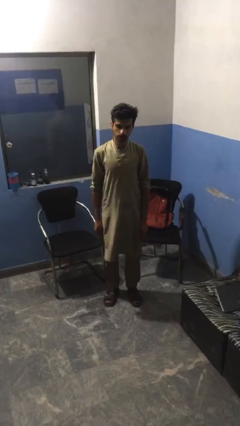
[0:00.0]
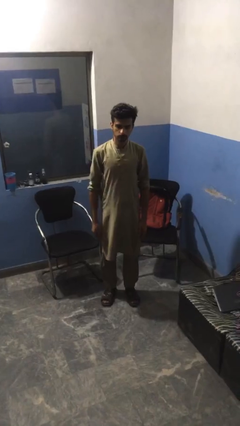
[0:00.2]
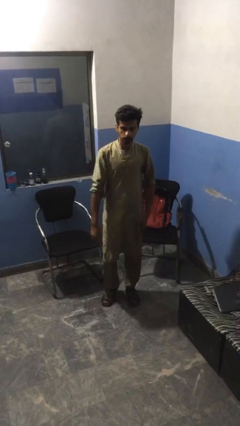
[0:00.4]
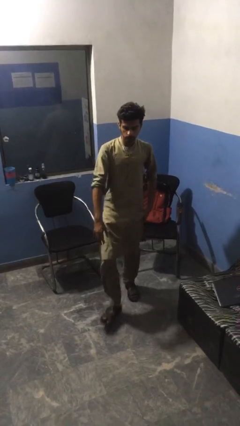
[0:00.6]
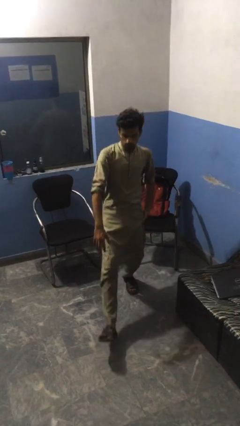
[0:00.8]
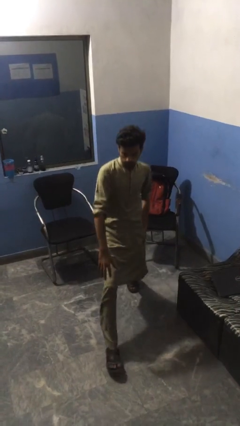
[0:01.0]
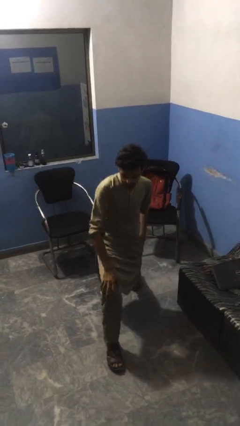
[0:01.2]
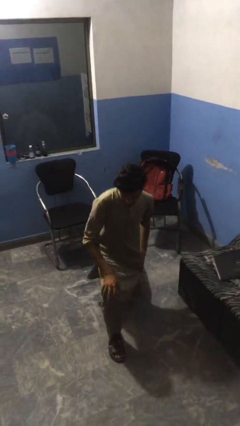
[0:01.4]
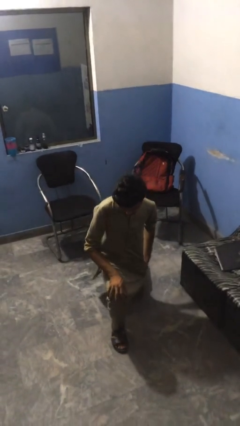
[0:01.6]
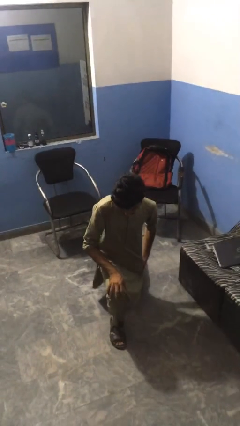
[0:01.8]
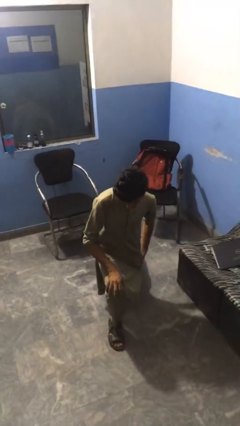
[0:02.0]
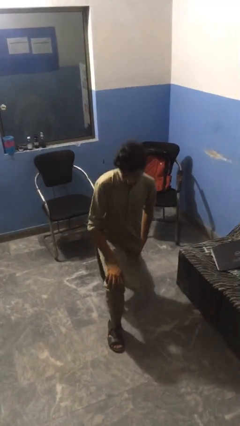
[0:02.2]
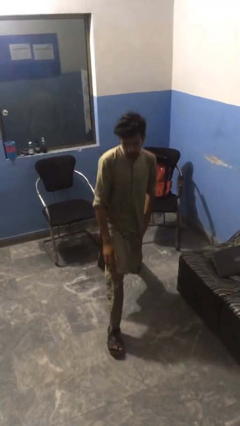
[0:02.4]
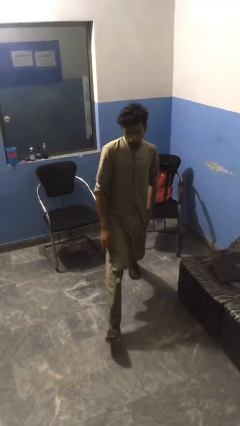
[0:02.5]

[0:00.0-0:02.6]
person exercises with lunges

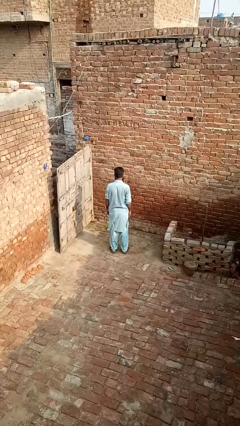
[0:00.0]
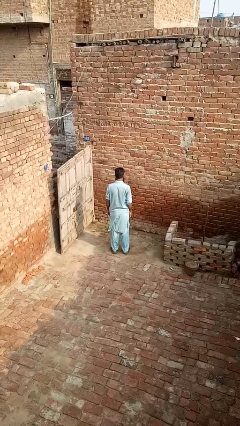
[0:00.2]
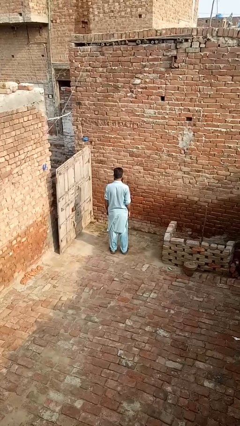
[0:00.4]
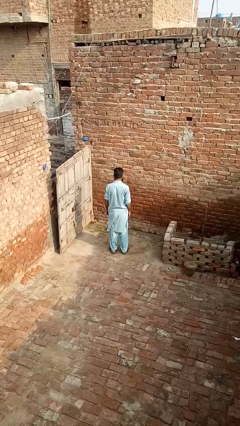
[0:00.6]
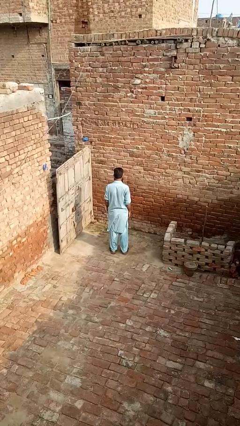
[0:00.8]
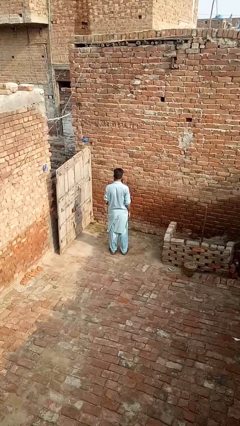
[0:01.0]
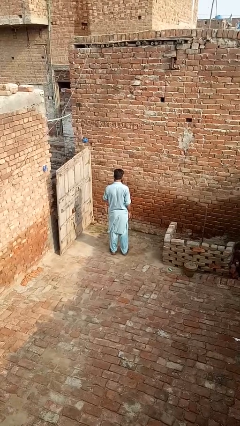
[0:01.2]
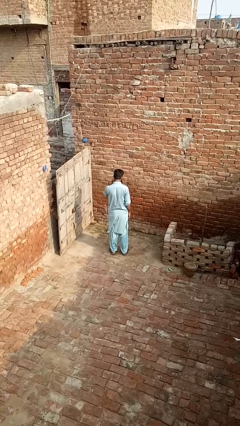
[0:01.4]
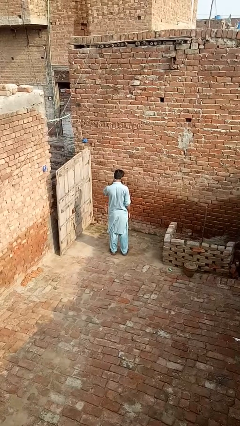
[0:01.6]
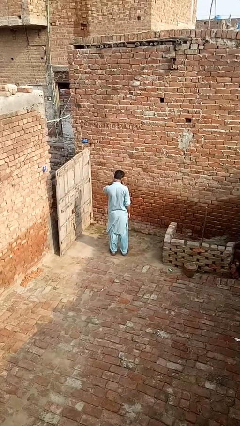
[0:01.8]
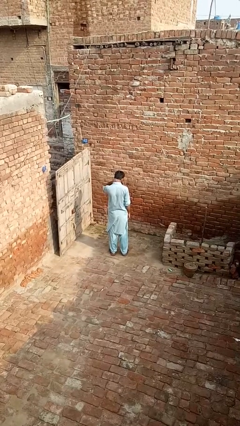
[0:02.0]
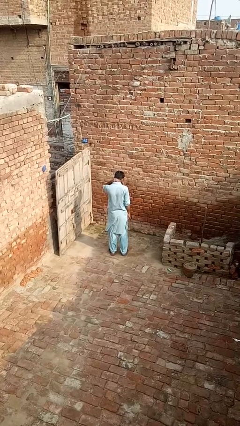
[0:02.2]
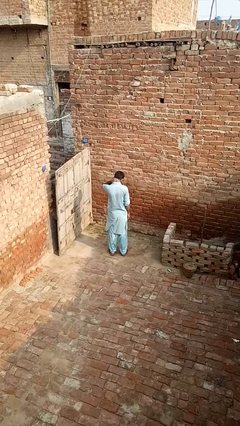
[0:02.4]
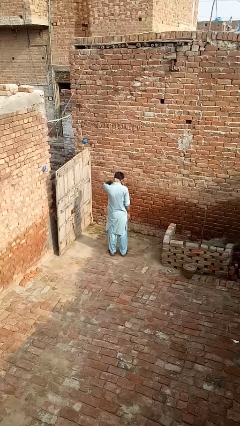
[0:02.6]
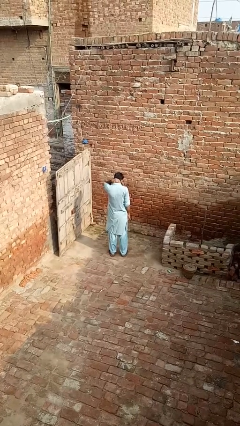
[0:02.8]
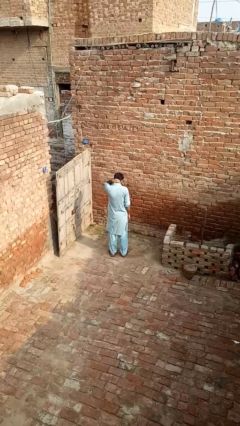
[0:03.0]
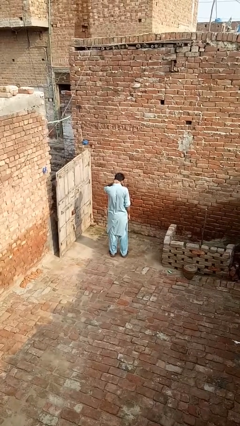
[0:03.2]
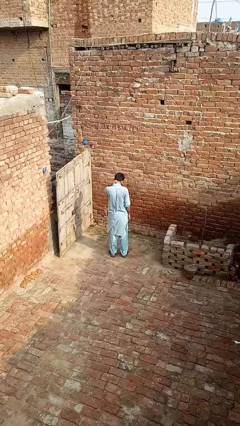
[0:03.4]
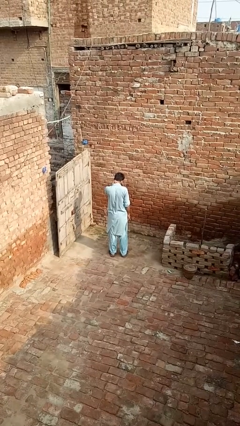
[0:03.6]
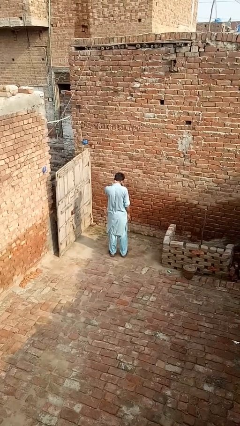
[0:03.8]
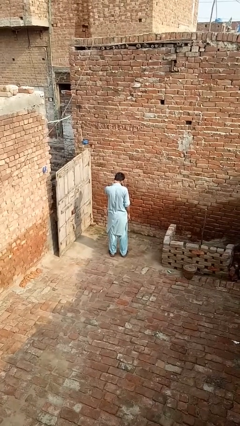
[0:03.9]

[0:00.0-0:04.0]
person rubs neck

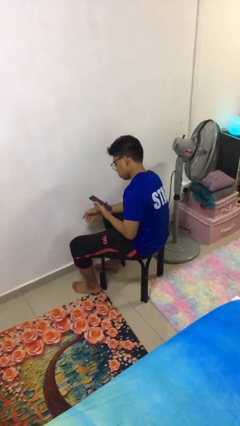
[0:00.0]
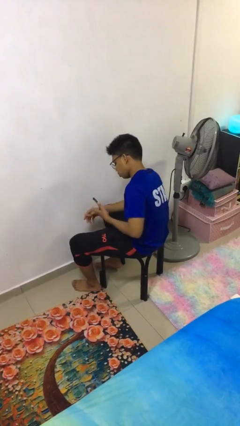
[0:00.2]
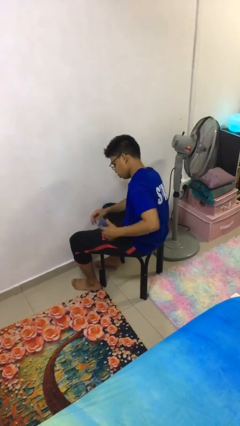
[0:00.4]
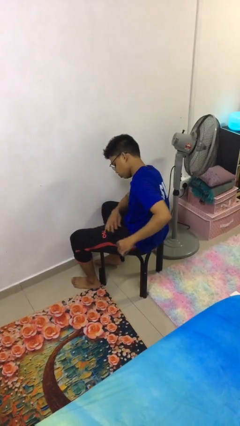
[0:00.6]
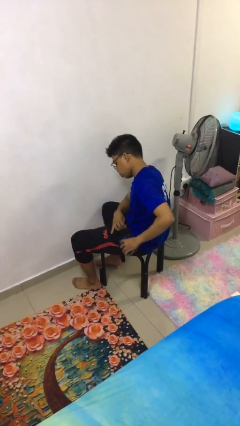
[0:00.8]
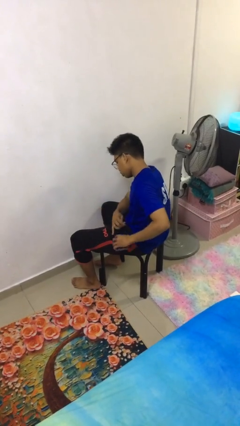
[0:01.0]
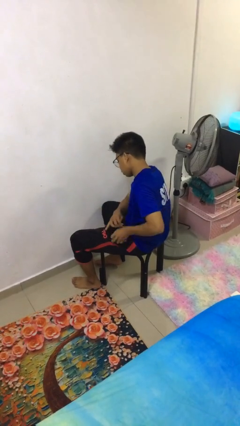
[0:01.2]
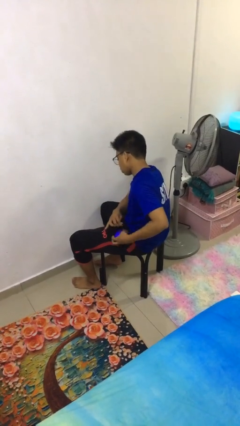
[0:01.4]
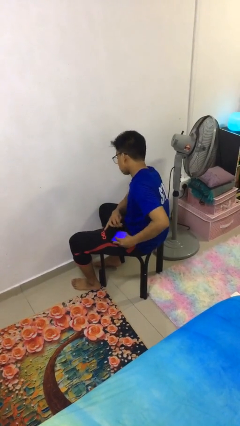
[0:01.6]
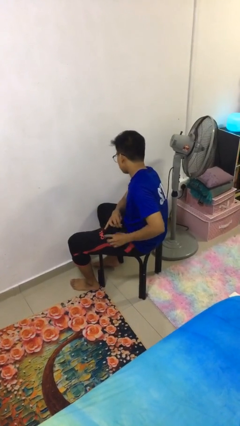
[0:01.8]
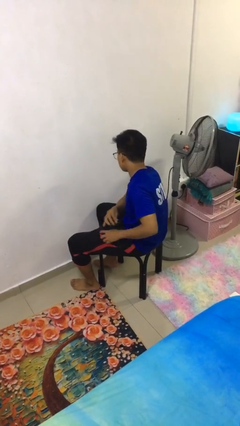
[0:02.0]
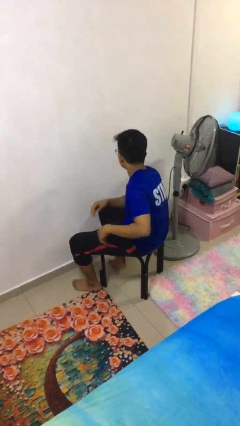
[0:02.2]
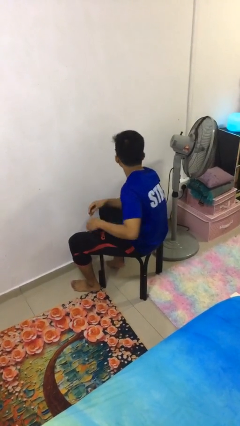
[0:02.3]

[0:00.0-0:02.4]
person puts phone into pocket

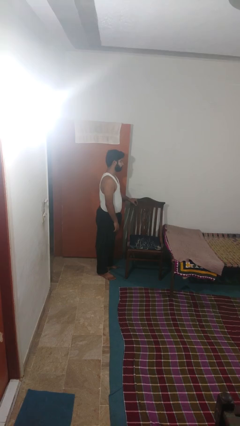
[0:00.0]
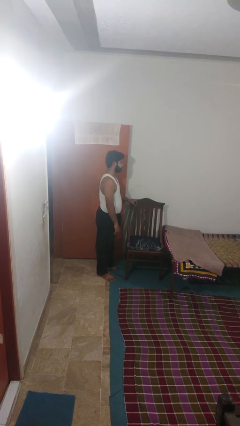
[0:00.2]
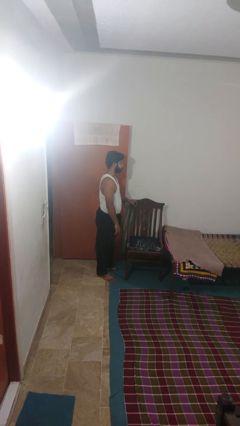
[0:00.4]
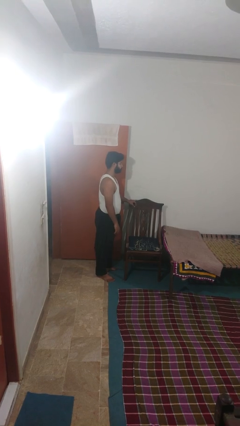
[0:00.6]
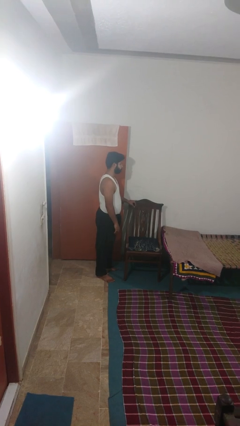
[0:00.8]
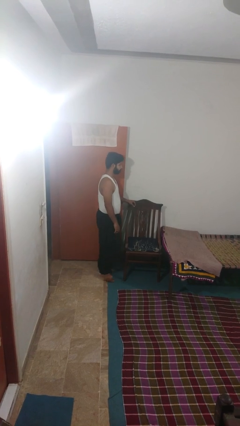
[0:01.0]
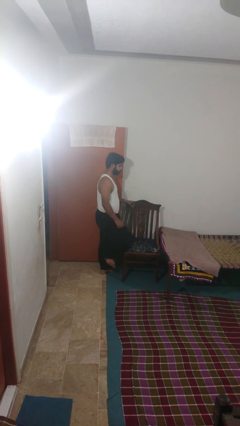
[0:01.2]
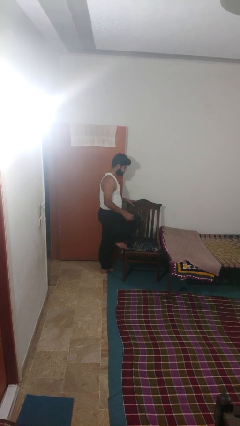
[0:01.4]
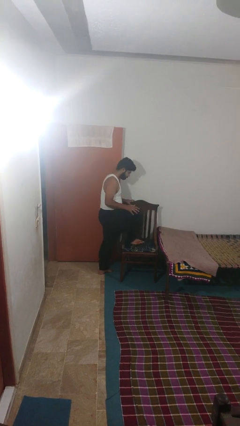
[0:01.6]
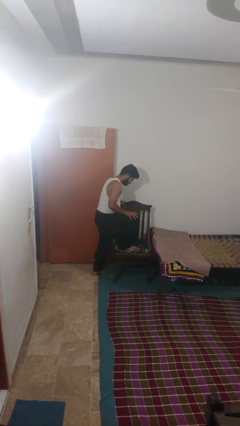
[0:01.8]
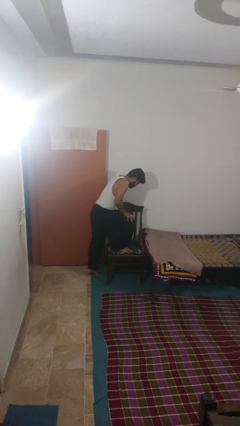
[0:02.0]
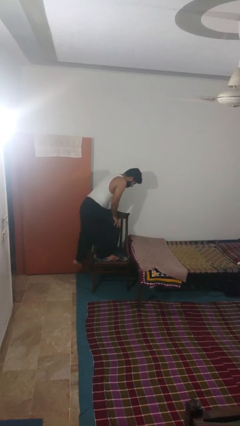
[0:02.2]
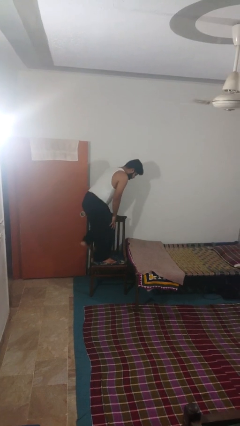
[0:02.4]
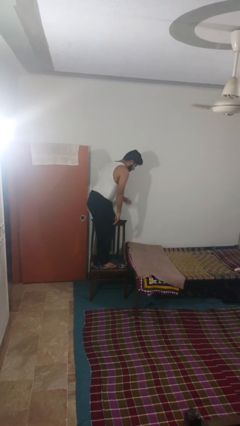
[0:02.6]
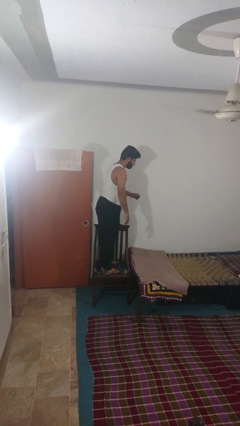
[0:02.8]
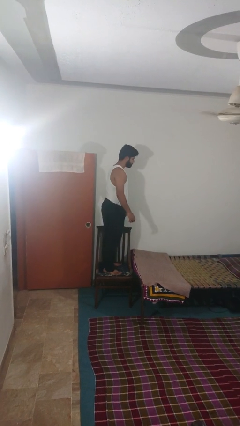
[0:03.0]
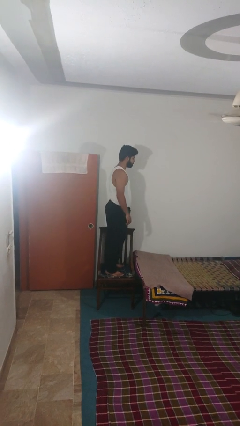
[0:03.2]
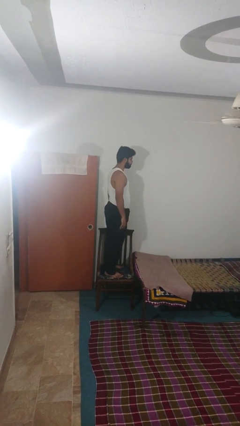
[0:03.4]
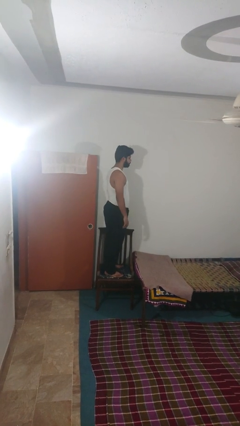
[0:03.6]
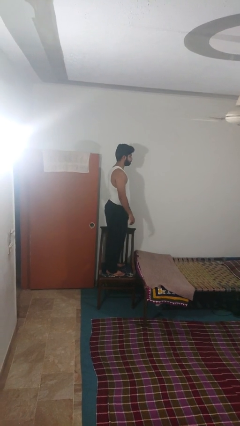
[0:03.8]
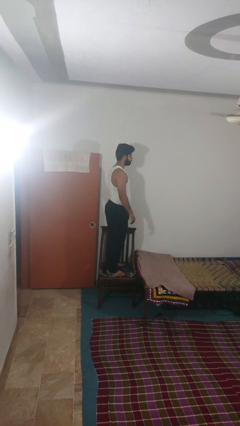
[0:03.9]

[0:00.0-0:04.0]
person climbs on chair

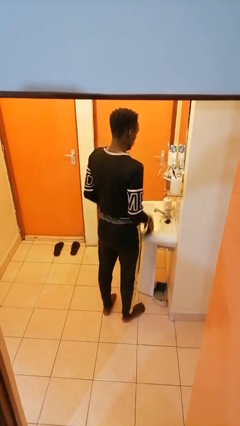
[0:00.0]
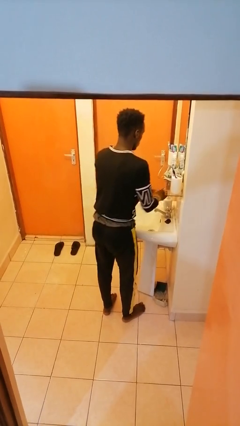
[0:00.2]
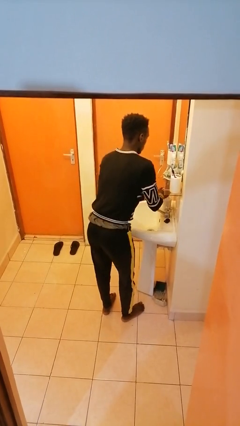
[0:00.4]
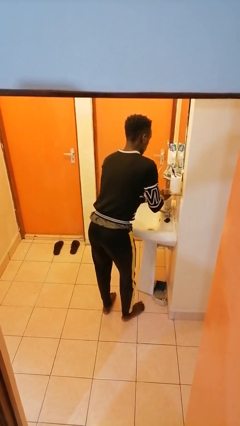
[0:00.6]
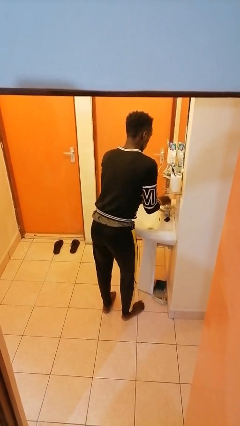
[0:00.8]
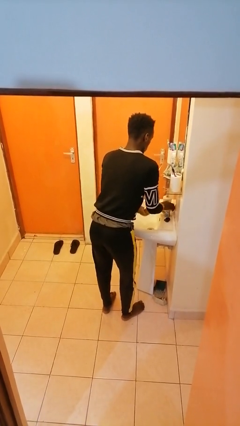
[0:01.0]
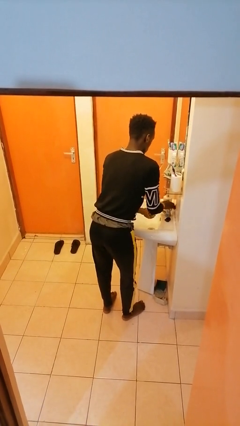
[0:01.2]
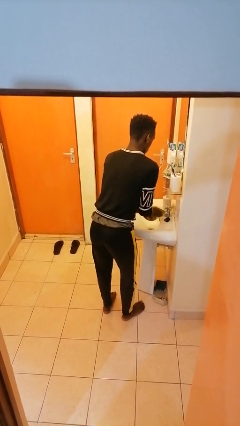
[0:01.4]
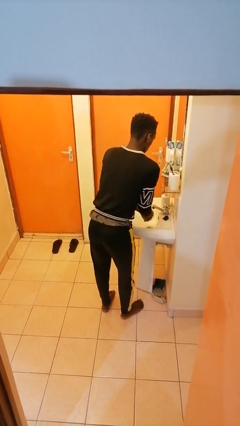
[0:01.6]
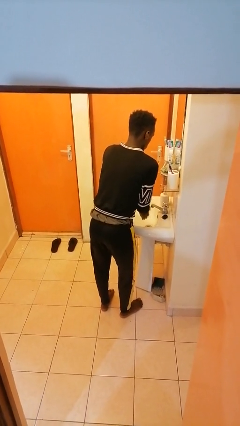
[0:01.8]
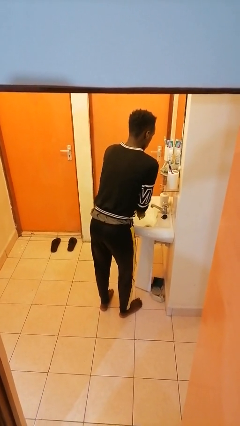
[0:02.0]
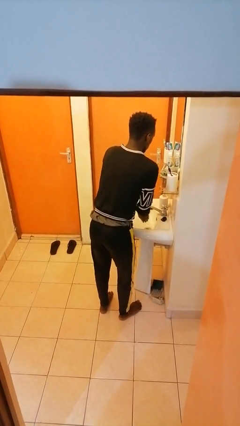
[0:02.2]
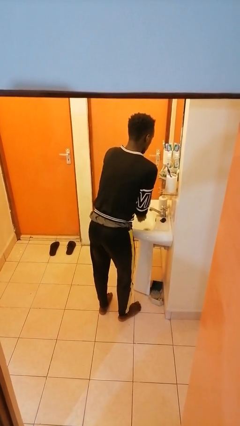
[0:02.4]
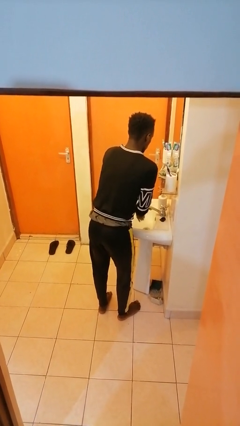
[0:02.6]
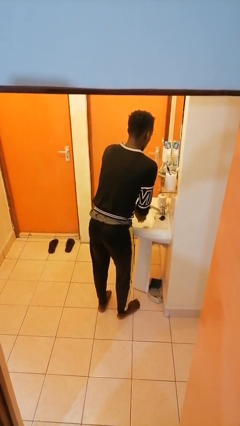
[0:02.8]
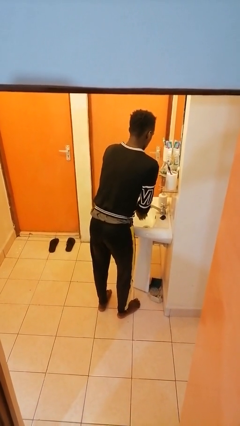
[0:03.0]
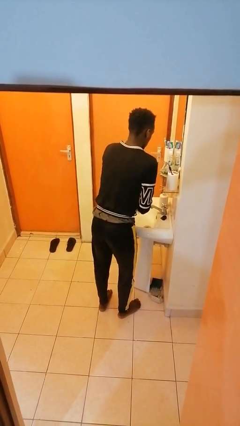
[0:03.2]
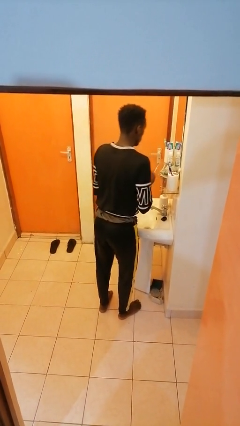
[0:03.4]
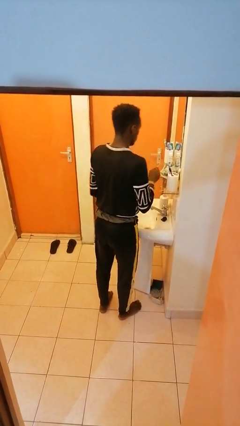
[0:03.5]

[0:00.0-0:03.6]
person washes hands

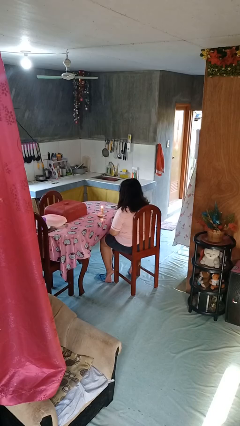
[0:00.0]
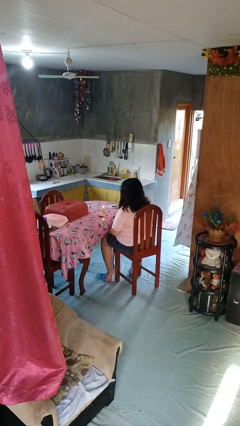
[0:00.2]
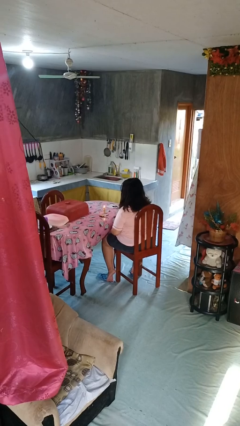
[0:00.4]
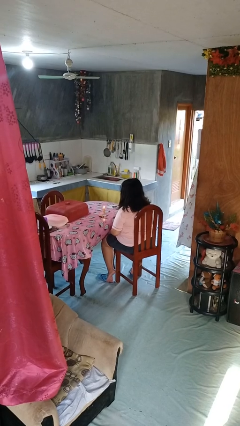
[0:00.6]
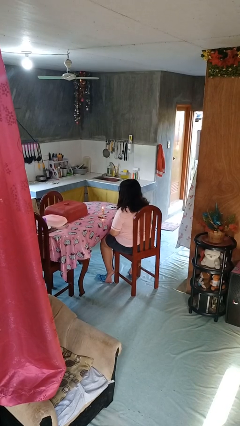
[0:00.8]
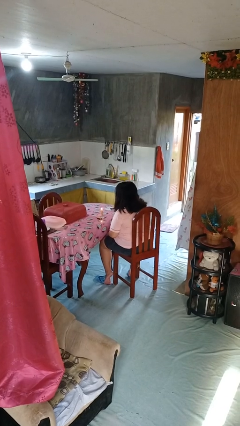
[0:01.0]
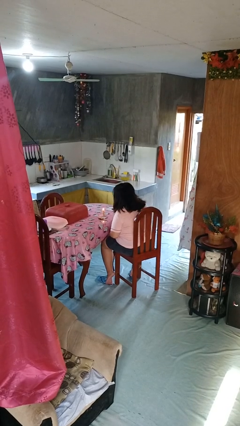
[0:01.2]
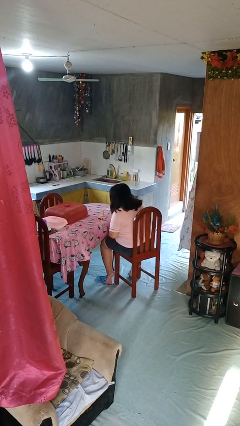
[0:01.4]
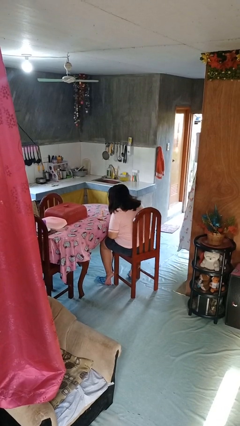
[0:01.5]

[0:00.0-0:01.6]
person extinguishes candle
